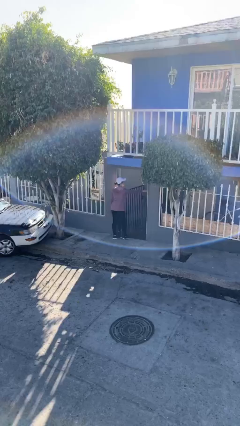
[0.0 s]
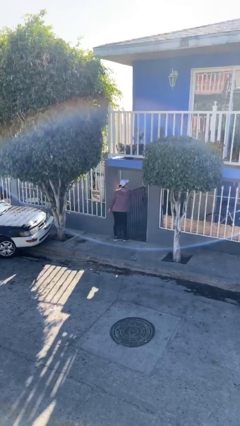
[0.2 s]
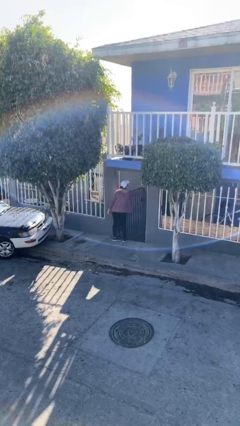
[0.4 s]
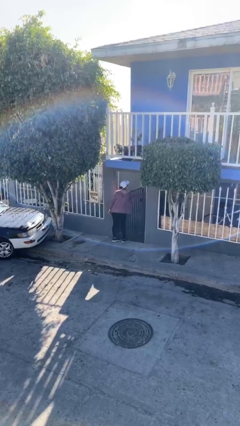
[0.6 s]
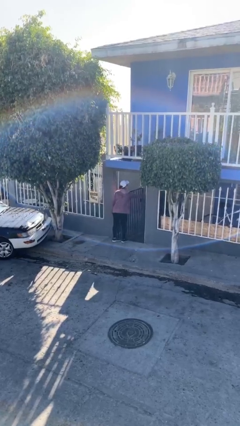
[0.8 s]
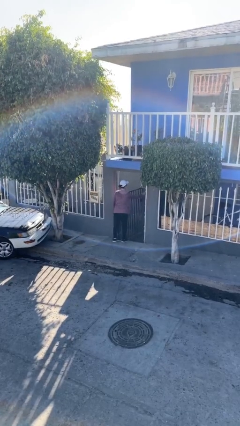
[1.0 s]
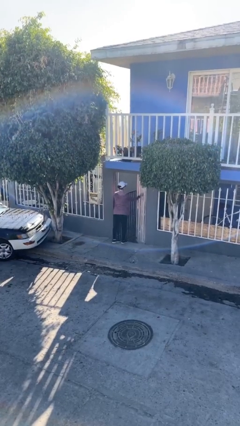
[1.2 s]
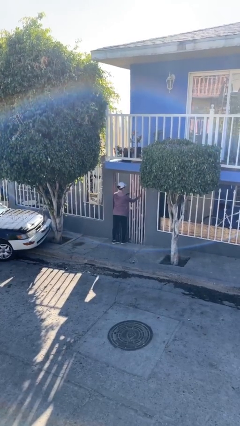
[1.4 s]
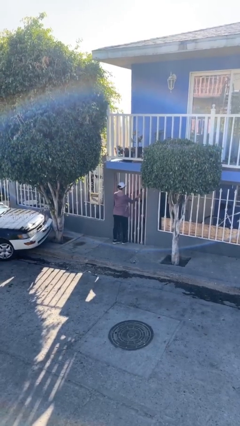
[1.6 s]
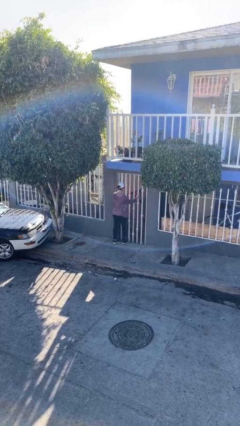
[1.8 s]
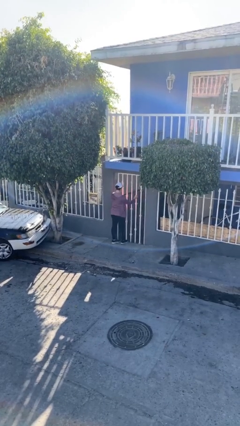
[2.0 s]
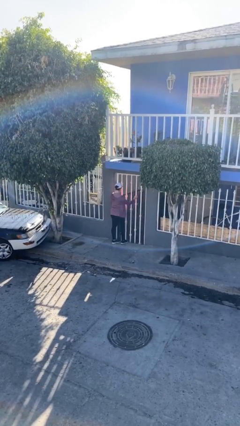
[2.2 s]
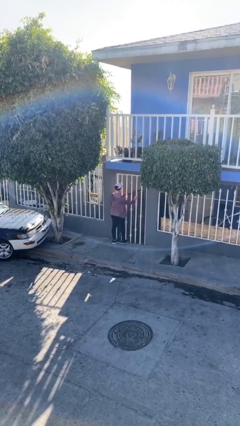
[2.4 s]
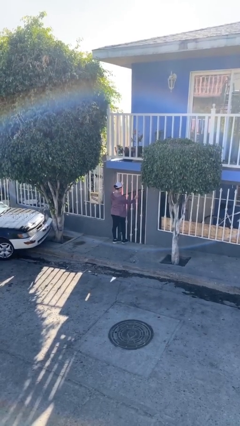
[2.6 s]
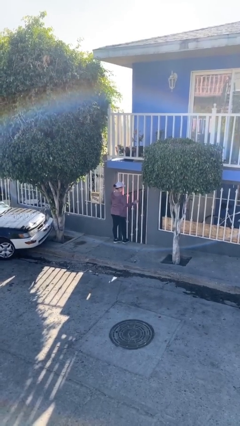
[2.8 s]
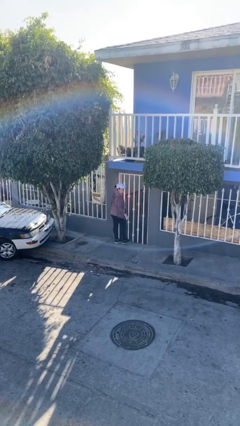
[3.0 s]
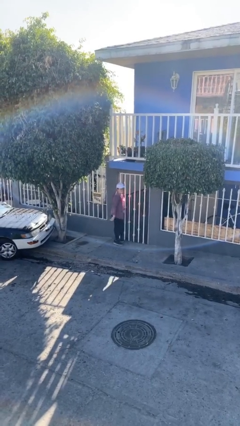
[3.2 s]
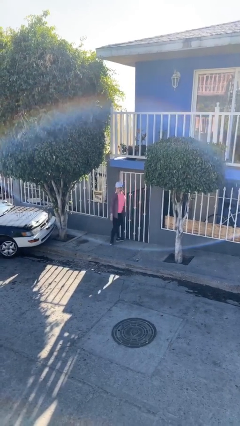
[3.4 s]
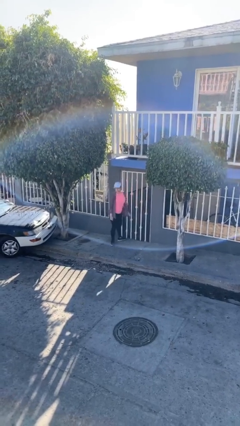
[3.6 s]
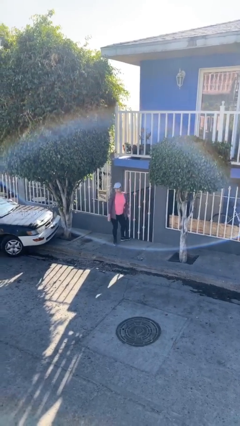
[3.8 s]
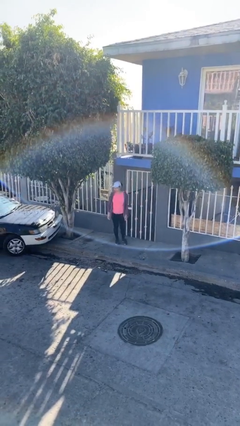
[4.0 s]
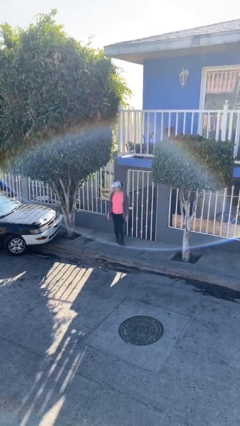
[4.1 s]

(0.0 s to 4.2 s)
person closes facility door

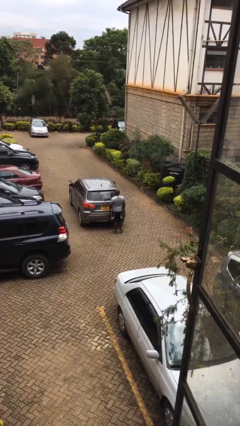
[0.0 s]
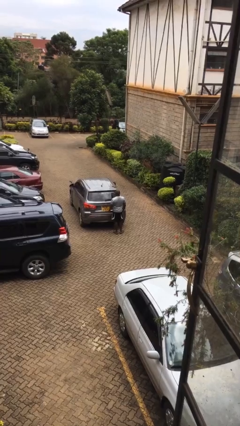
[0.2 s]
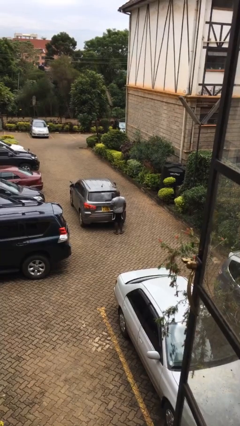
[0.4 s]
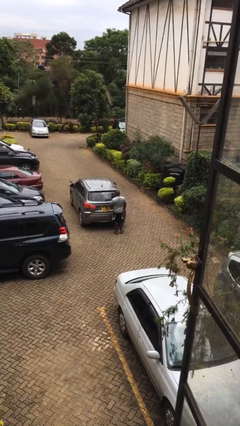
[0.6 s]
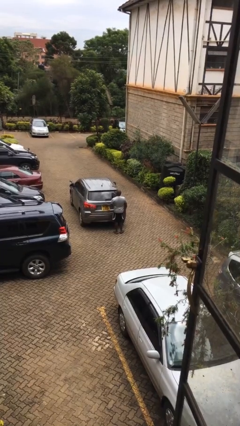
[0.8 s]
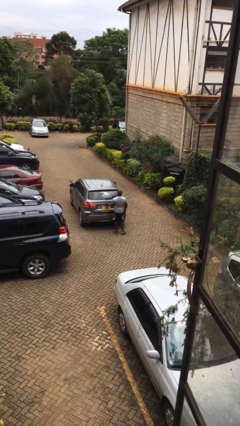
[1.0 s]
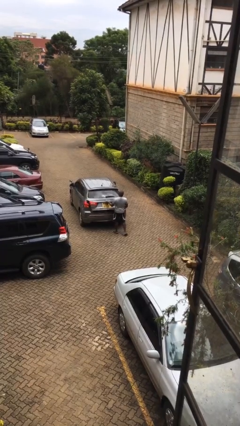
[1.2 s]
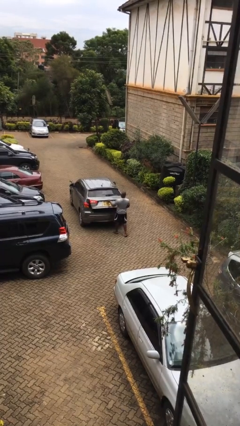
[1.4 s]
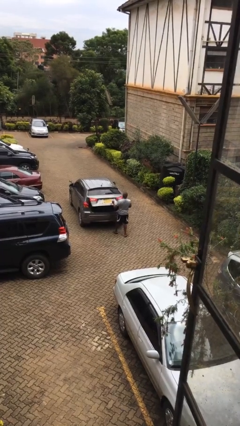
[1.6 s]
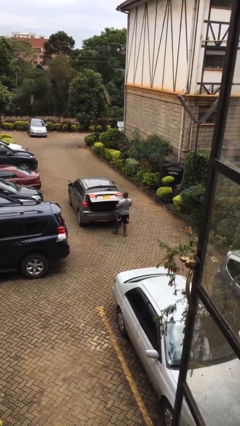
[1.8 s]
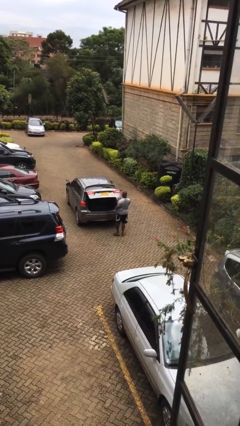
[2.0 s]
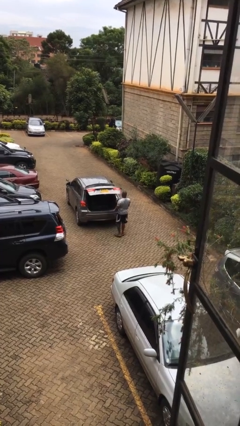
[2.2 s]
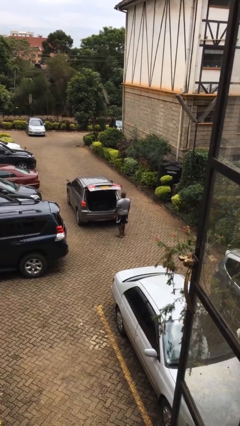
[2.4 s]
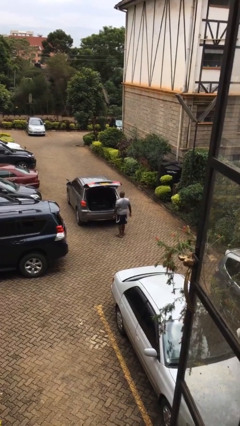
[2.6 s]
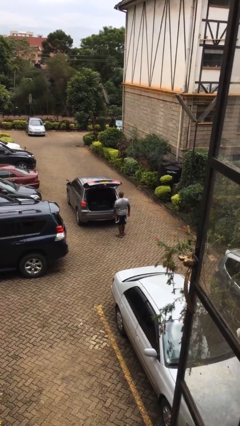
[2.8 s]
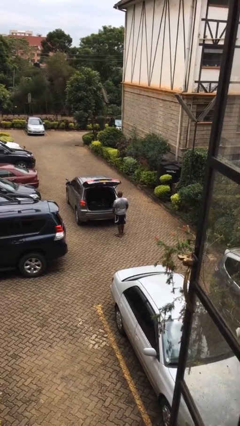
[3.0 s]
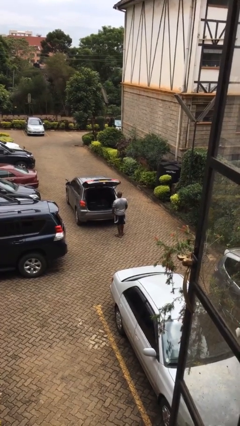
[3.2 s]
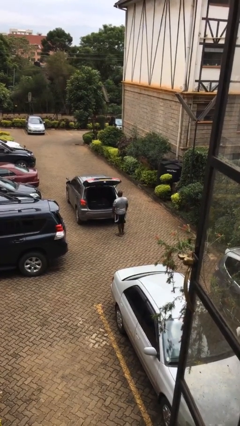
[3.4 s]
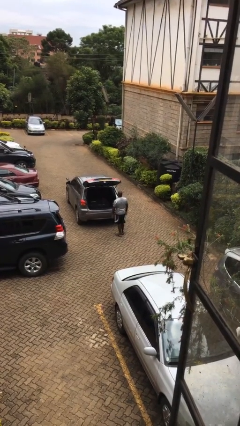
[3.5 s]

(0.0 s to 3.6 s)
person opens car trunk

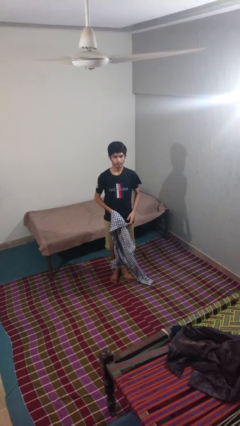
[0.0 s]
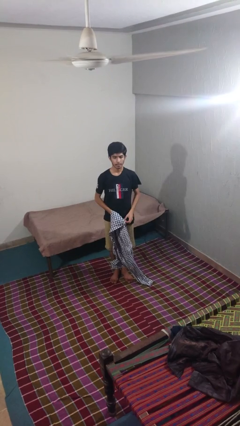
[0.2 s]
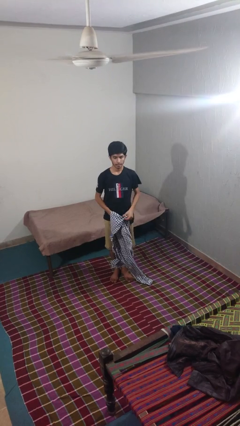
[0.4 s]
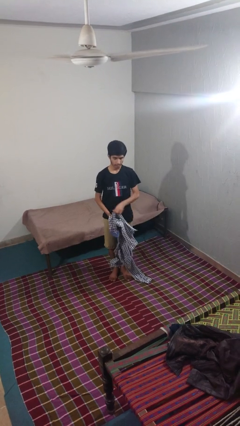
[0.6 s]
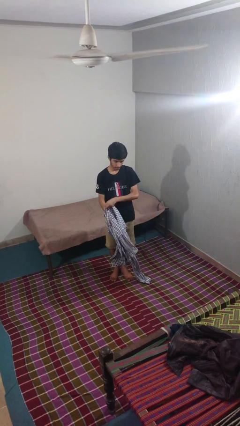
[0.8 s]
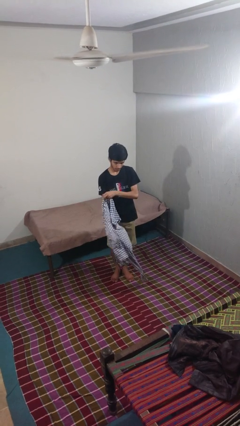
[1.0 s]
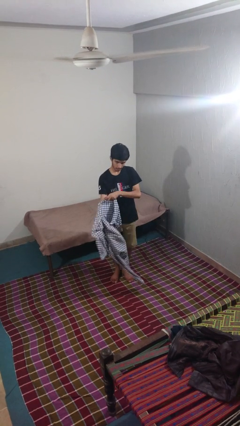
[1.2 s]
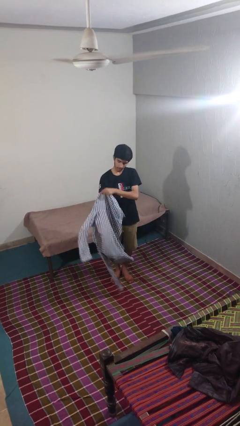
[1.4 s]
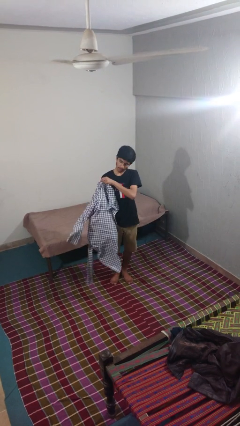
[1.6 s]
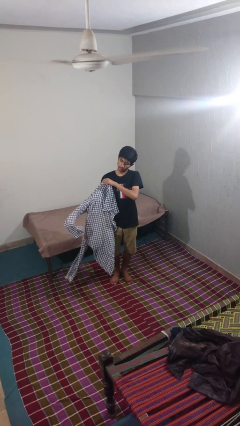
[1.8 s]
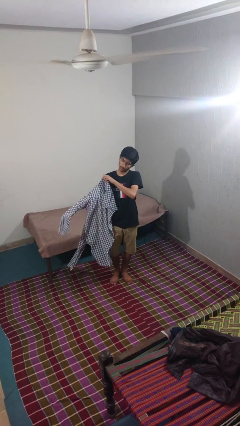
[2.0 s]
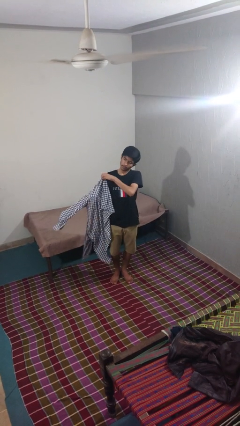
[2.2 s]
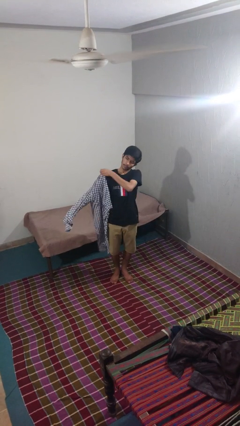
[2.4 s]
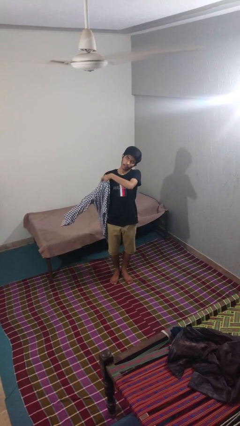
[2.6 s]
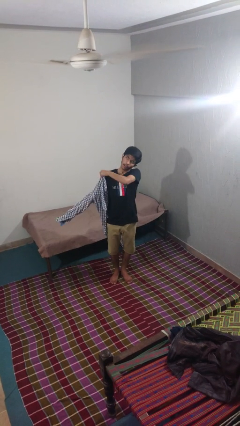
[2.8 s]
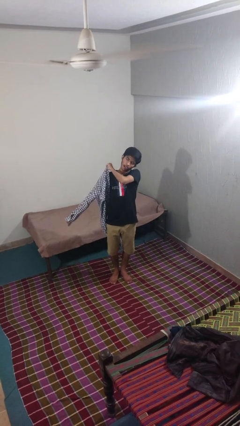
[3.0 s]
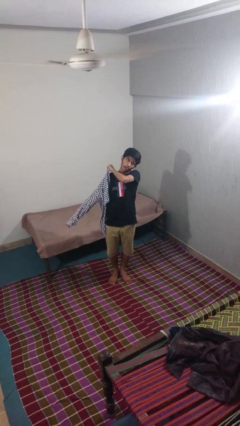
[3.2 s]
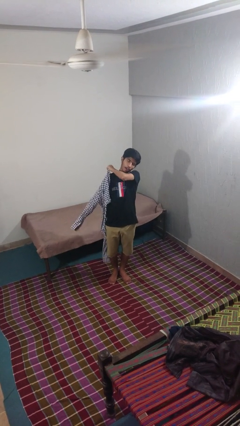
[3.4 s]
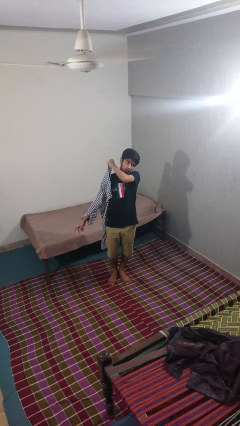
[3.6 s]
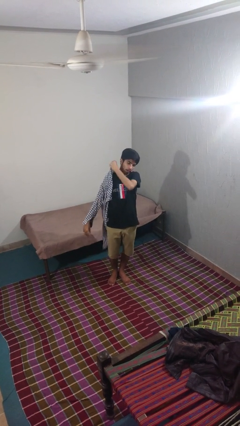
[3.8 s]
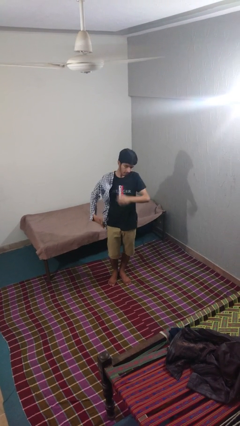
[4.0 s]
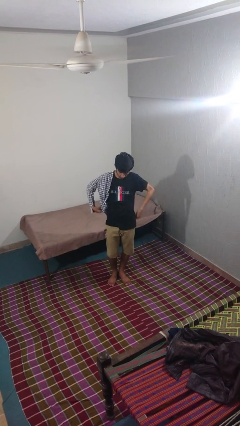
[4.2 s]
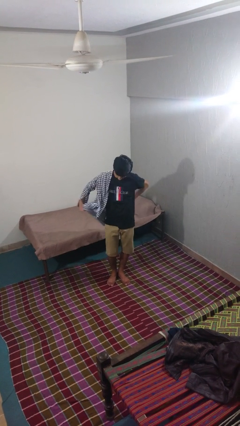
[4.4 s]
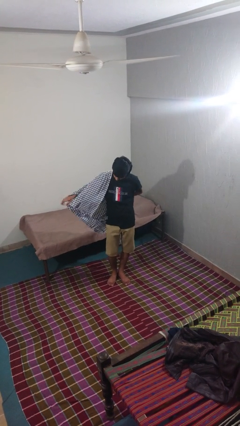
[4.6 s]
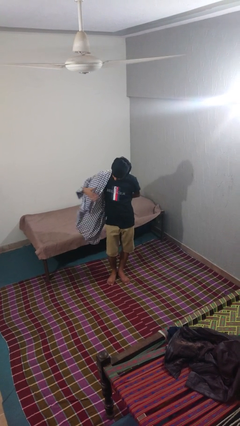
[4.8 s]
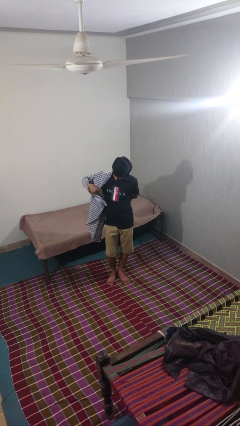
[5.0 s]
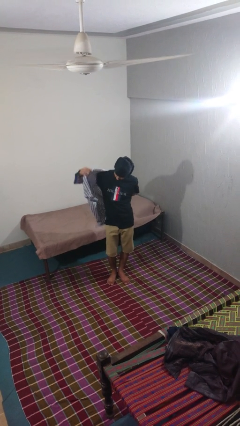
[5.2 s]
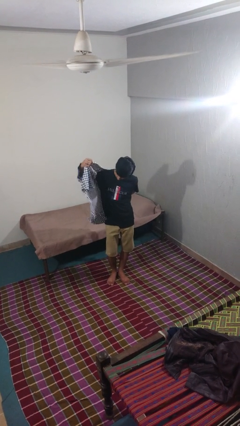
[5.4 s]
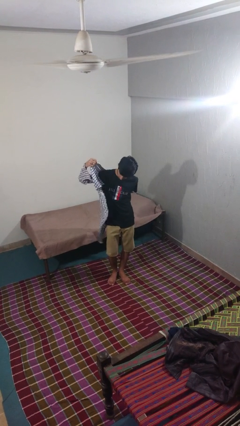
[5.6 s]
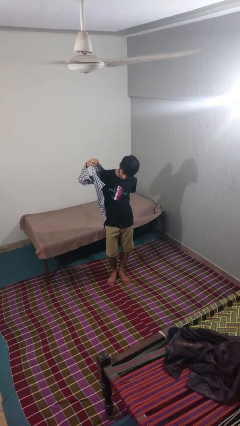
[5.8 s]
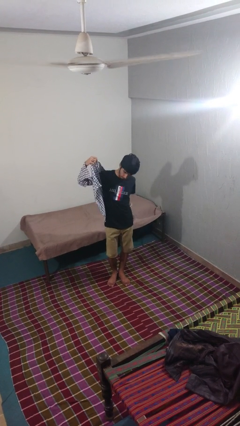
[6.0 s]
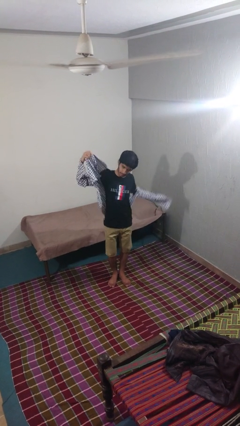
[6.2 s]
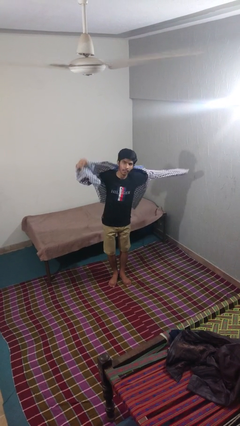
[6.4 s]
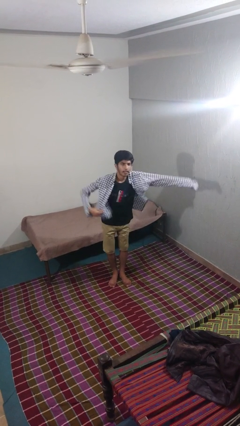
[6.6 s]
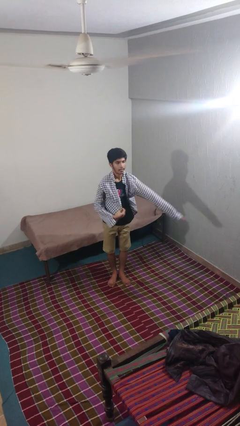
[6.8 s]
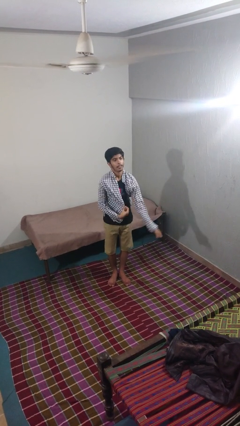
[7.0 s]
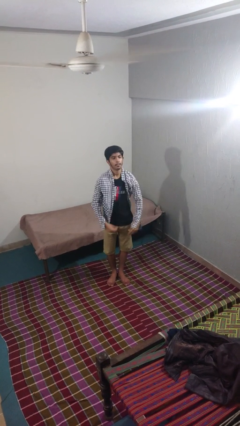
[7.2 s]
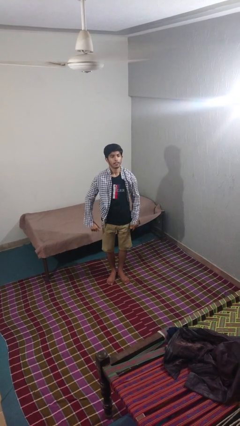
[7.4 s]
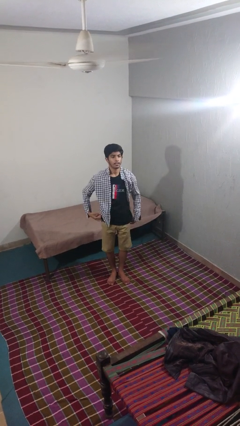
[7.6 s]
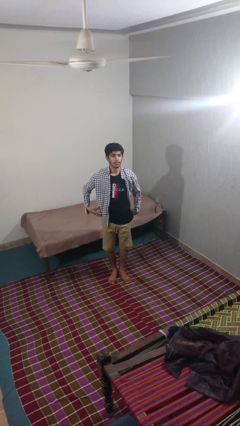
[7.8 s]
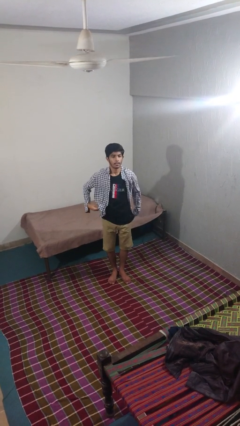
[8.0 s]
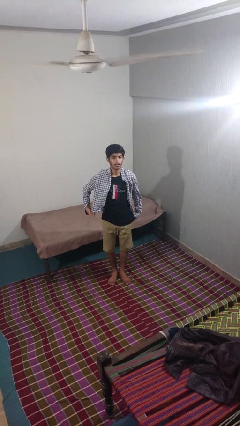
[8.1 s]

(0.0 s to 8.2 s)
person puts on shirt

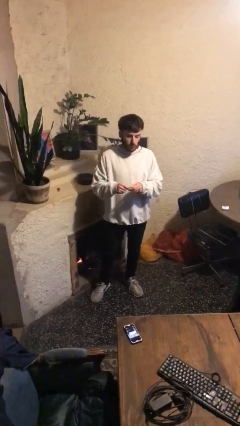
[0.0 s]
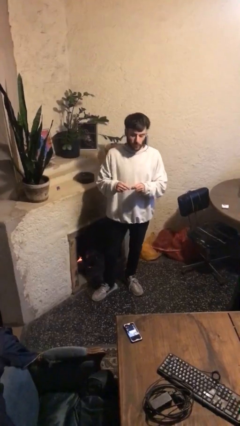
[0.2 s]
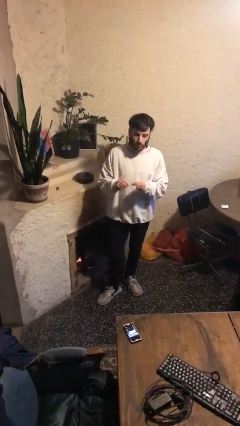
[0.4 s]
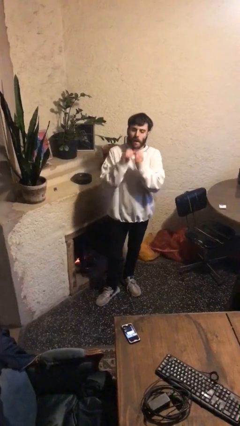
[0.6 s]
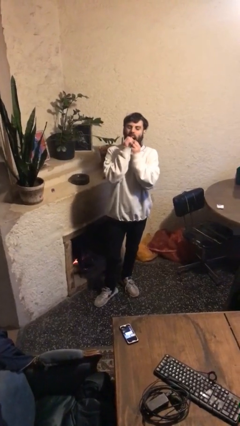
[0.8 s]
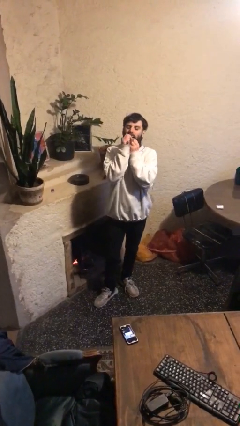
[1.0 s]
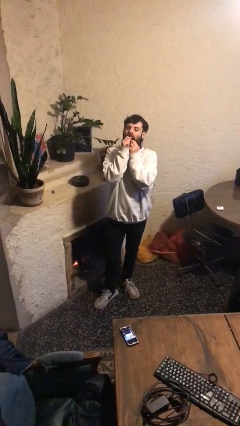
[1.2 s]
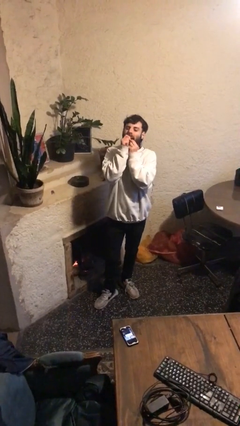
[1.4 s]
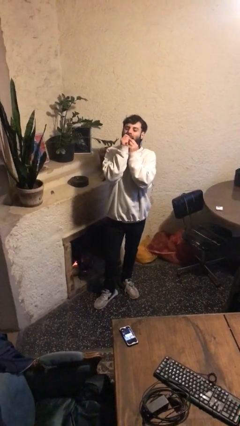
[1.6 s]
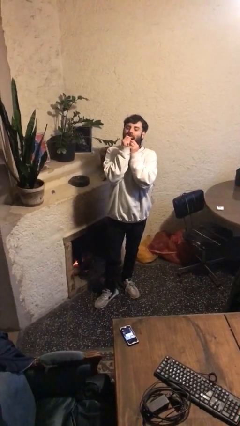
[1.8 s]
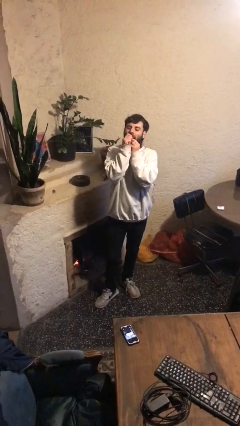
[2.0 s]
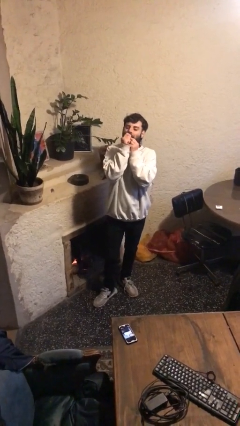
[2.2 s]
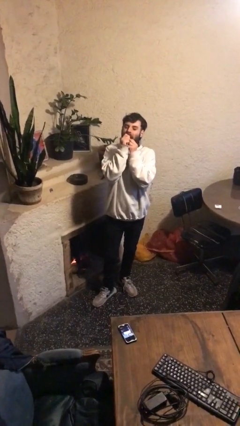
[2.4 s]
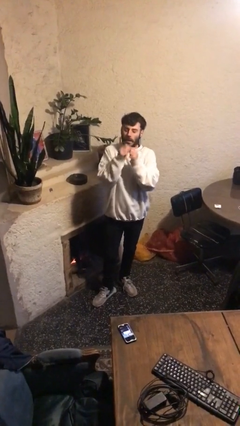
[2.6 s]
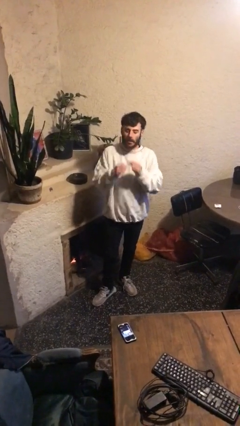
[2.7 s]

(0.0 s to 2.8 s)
person flosses
